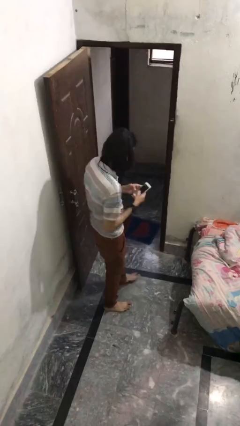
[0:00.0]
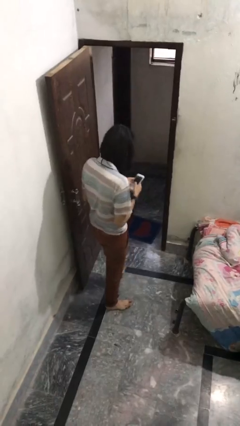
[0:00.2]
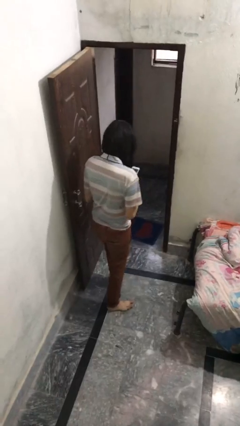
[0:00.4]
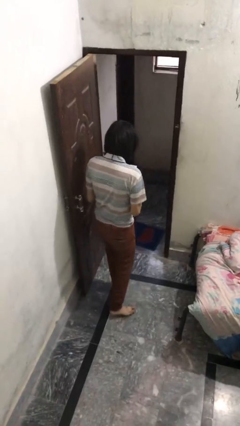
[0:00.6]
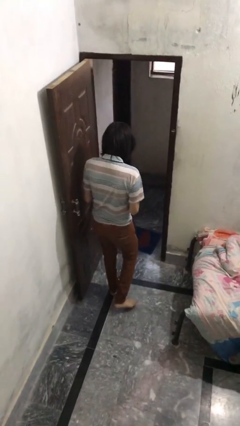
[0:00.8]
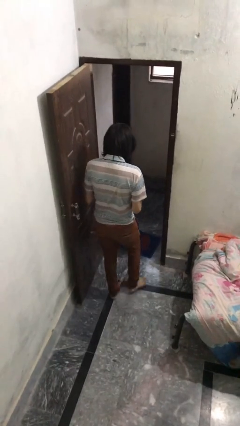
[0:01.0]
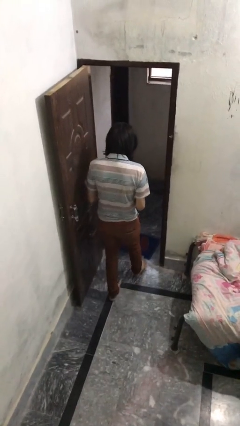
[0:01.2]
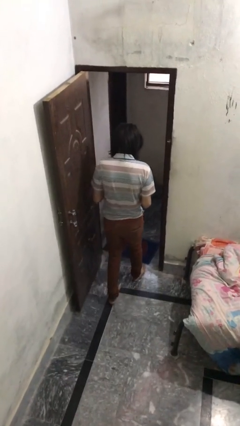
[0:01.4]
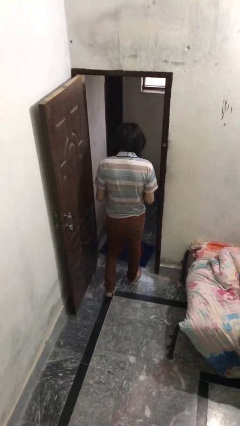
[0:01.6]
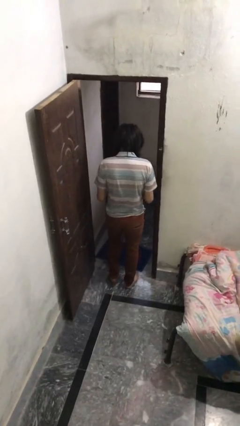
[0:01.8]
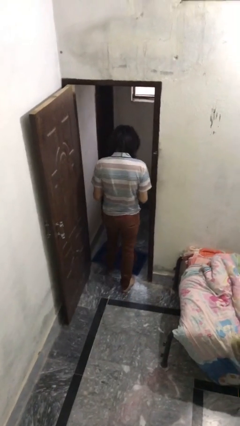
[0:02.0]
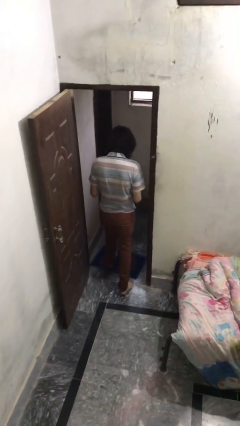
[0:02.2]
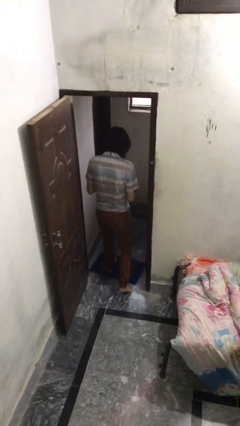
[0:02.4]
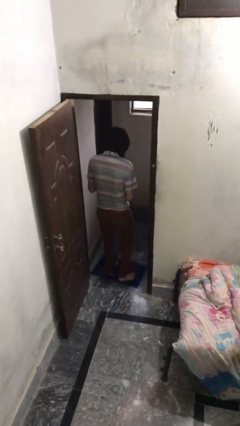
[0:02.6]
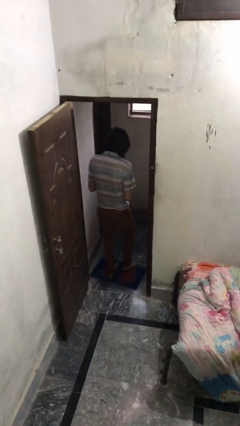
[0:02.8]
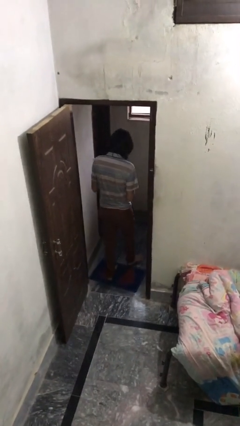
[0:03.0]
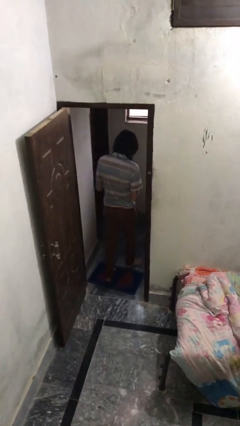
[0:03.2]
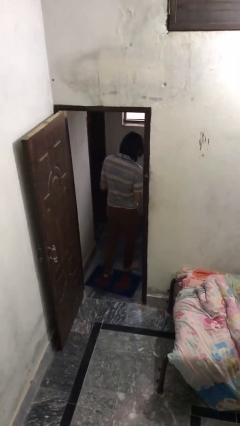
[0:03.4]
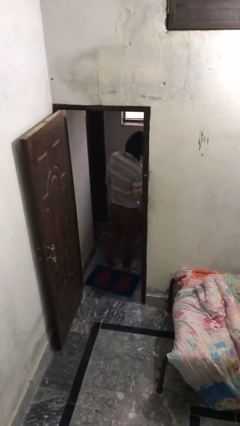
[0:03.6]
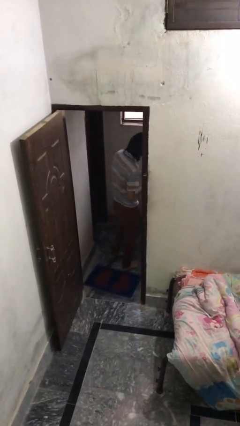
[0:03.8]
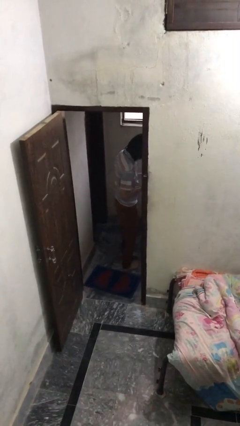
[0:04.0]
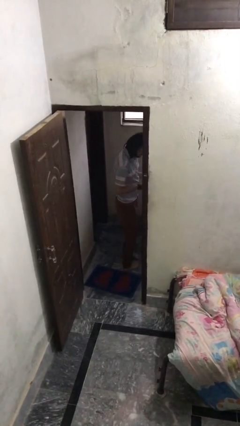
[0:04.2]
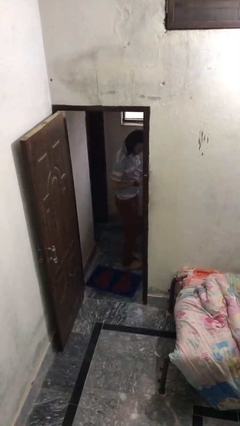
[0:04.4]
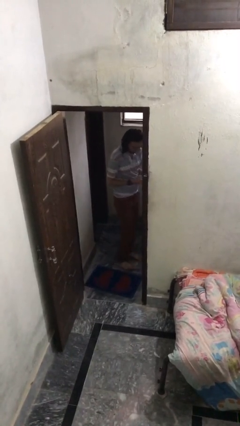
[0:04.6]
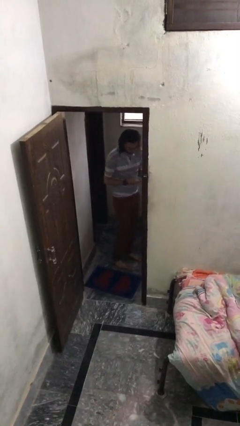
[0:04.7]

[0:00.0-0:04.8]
person exits scene through structure

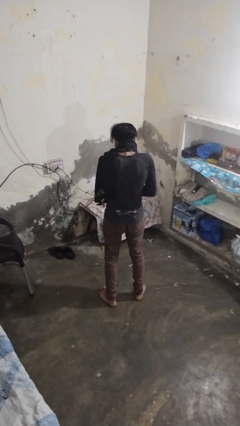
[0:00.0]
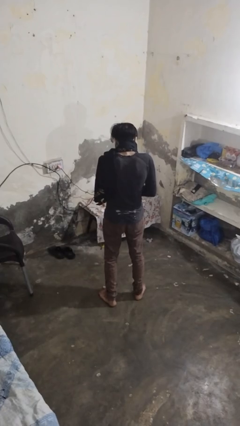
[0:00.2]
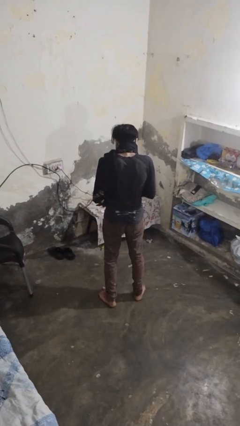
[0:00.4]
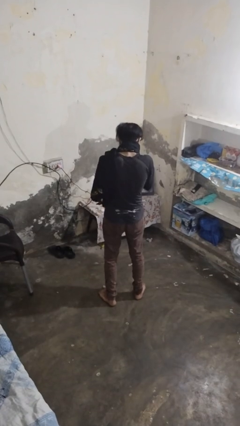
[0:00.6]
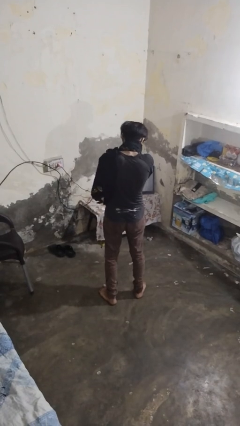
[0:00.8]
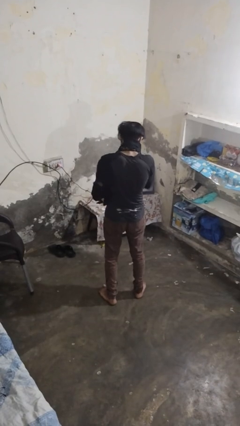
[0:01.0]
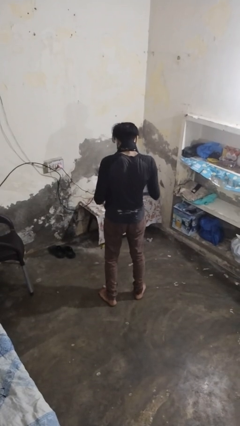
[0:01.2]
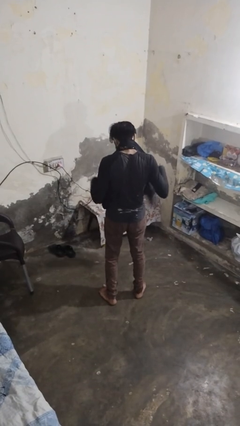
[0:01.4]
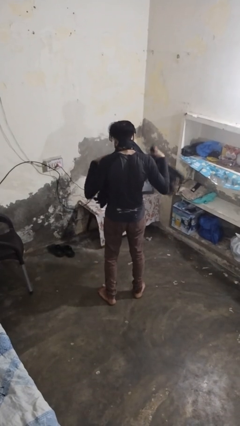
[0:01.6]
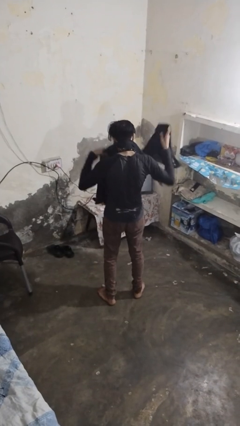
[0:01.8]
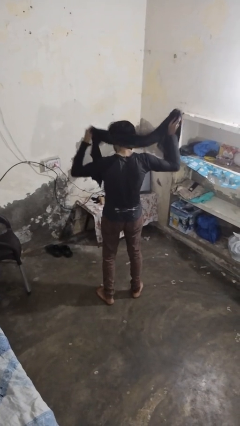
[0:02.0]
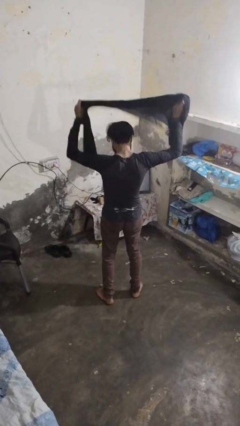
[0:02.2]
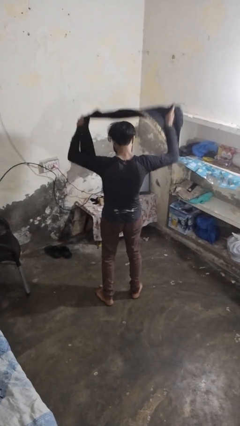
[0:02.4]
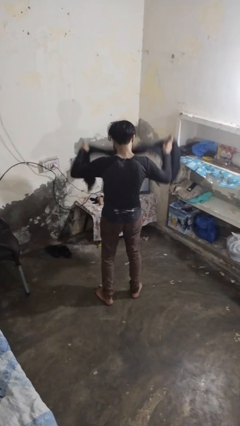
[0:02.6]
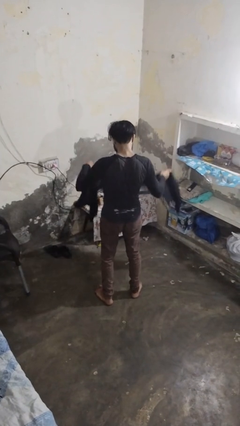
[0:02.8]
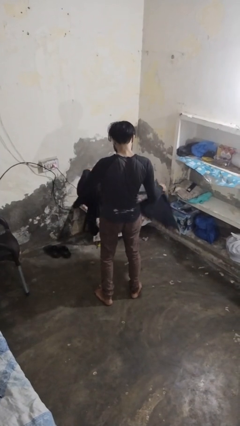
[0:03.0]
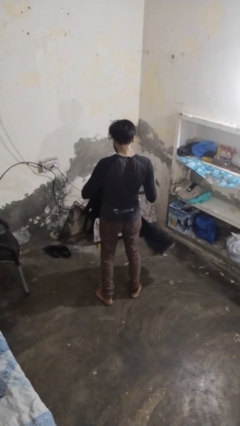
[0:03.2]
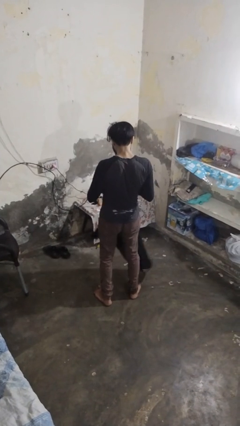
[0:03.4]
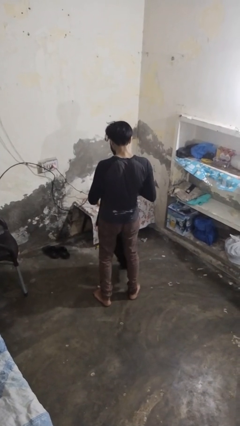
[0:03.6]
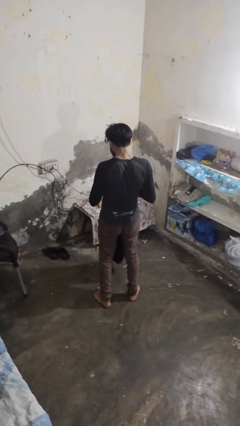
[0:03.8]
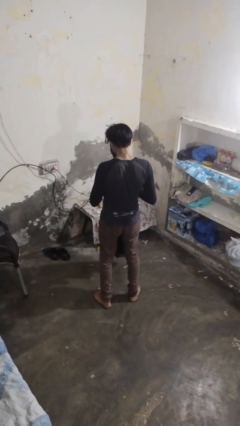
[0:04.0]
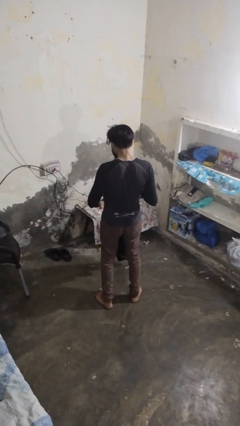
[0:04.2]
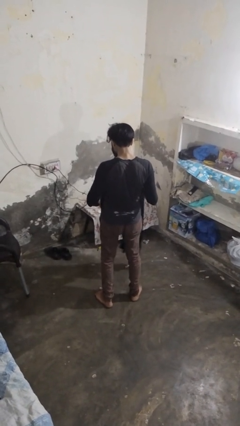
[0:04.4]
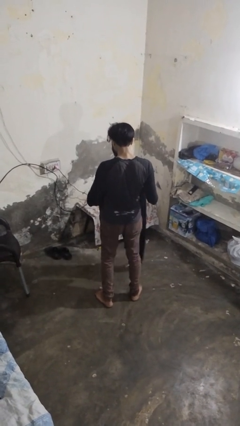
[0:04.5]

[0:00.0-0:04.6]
person takes off scarf

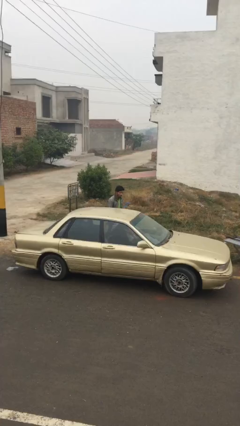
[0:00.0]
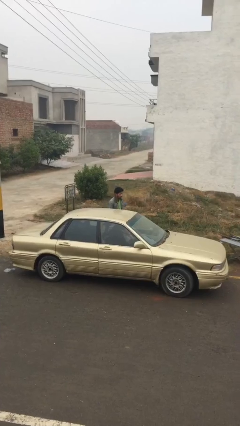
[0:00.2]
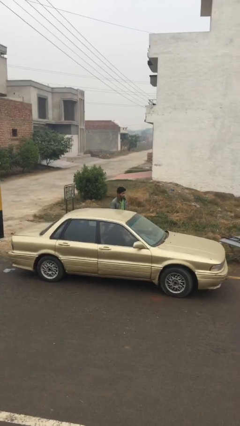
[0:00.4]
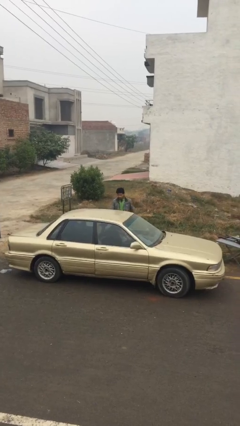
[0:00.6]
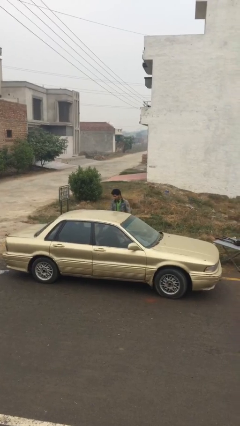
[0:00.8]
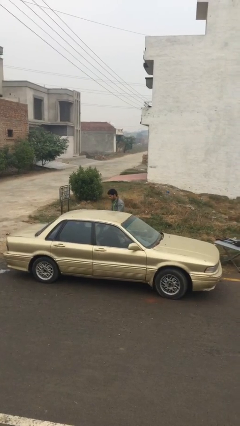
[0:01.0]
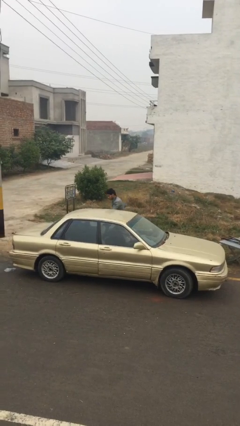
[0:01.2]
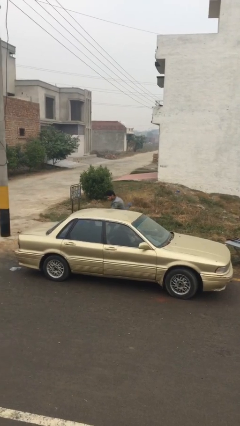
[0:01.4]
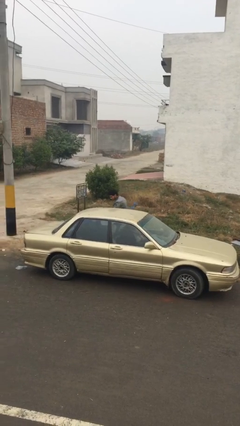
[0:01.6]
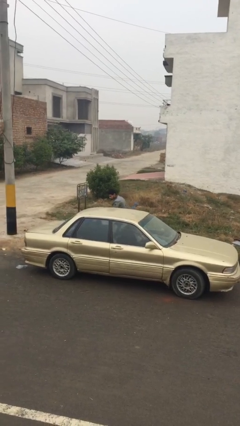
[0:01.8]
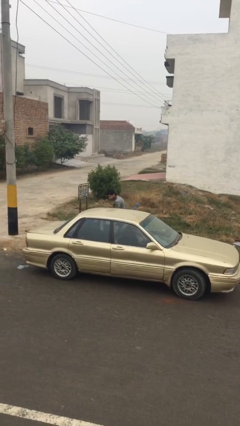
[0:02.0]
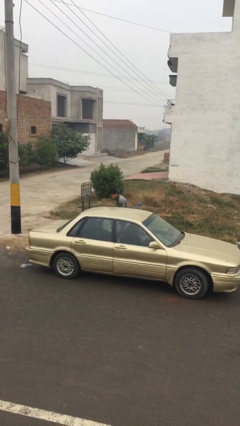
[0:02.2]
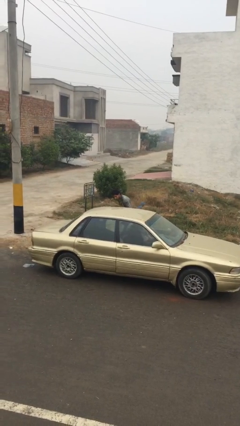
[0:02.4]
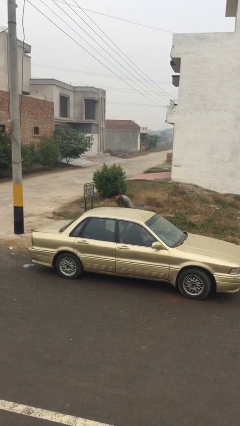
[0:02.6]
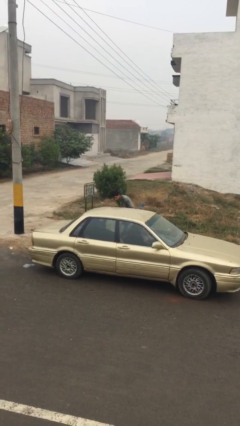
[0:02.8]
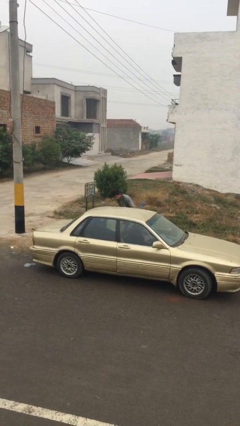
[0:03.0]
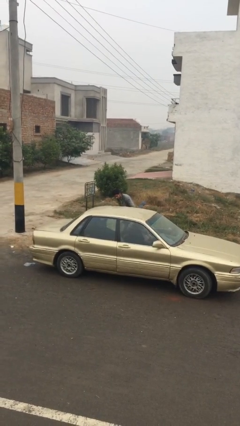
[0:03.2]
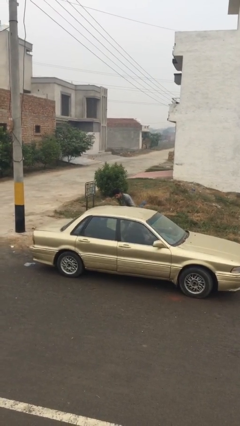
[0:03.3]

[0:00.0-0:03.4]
person opens car door

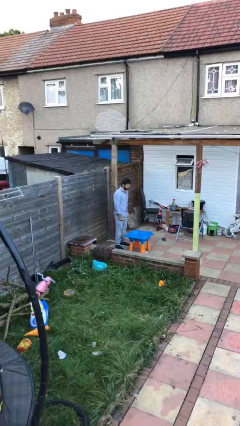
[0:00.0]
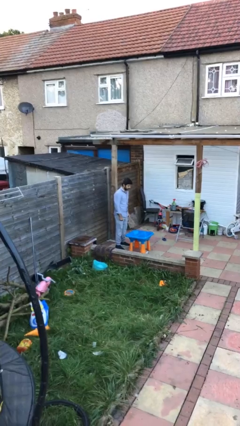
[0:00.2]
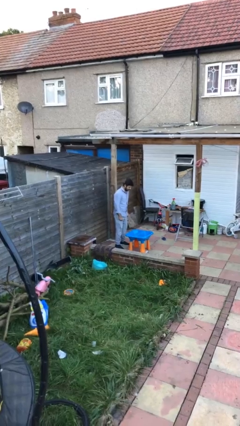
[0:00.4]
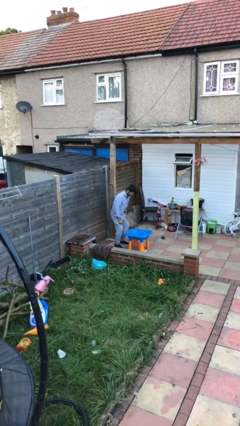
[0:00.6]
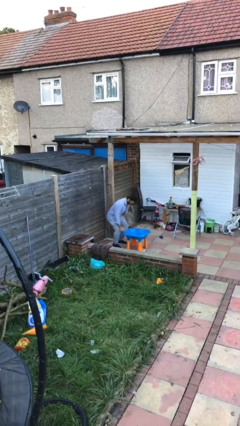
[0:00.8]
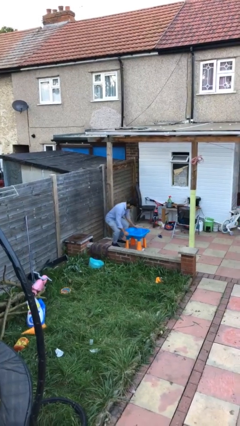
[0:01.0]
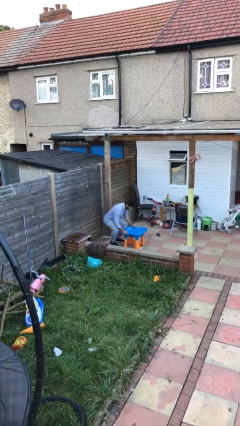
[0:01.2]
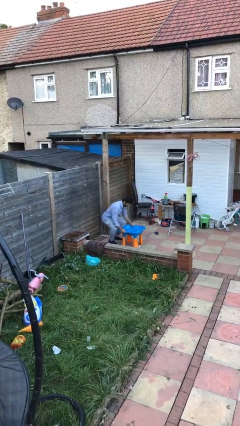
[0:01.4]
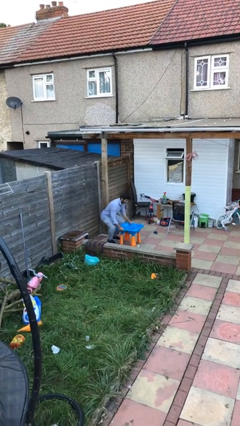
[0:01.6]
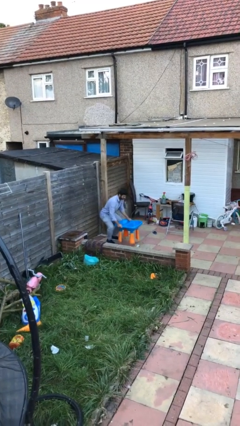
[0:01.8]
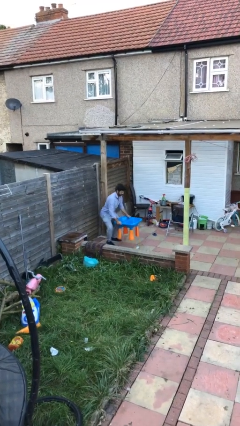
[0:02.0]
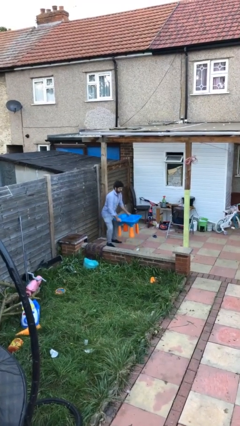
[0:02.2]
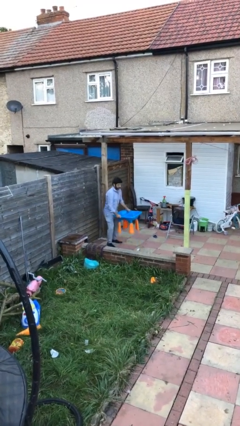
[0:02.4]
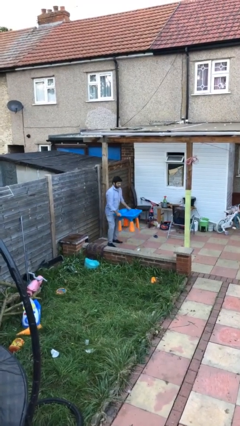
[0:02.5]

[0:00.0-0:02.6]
person picks up object from floor

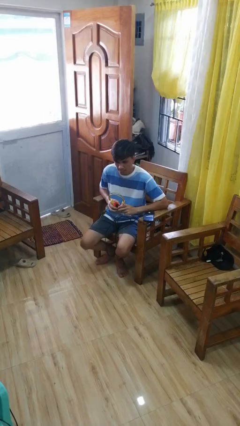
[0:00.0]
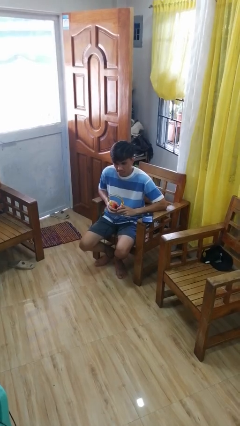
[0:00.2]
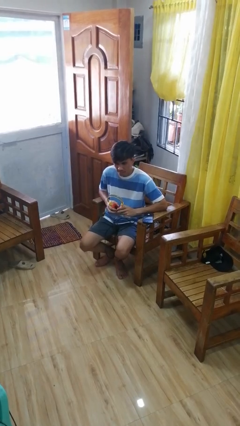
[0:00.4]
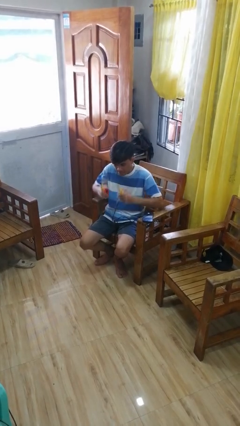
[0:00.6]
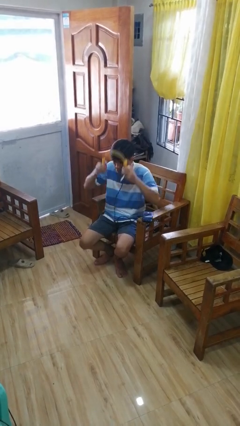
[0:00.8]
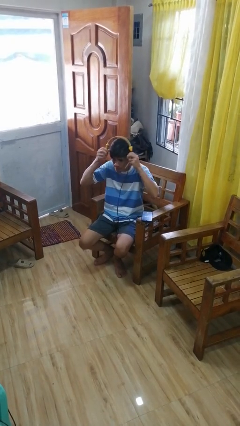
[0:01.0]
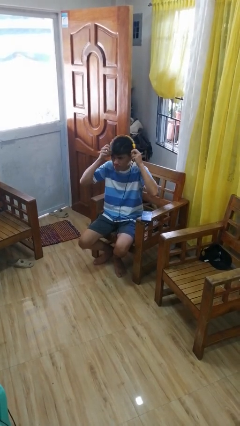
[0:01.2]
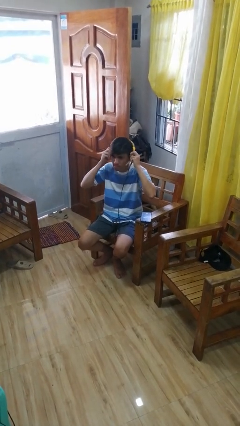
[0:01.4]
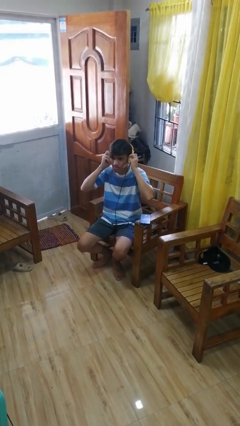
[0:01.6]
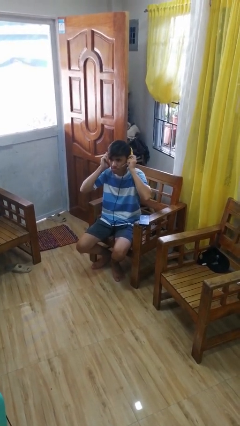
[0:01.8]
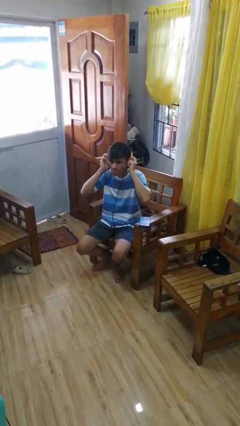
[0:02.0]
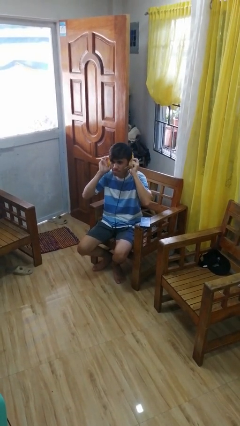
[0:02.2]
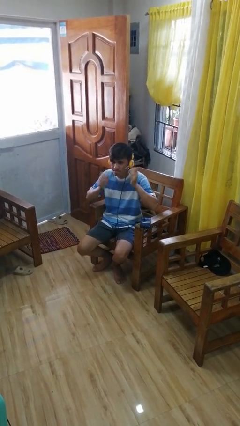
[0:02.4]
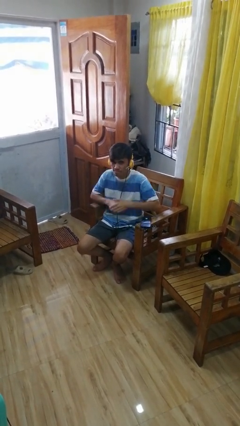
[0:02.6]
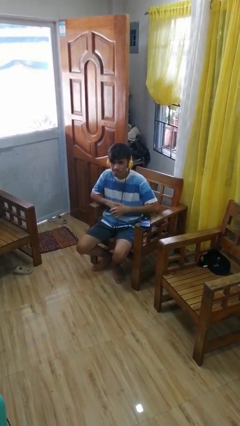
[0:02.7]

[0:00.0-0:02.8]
person puts on headphones
